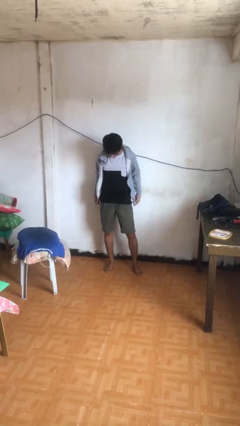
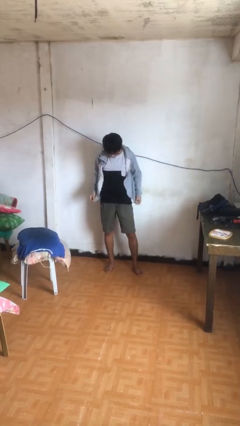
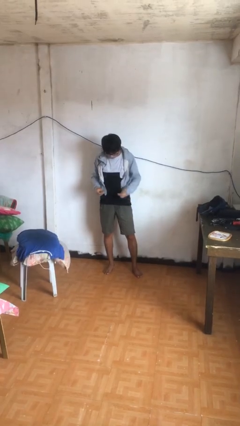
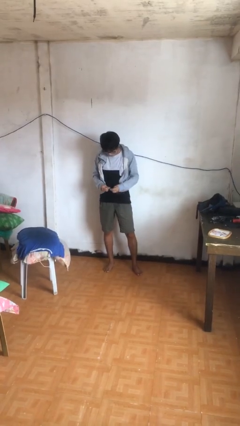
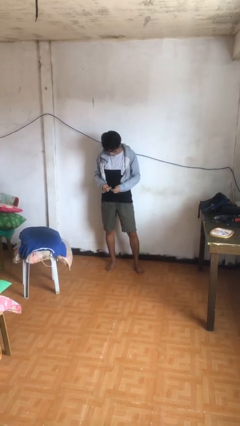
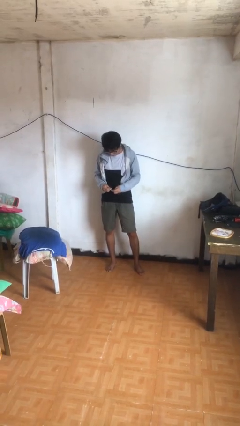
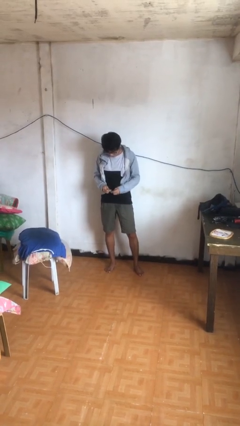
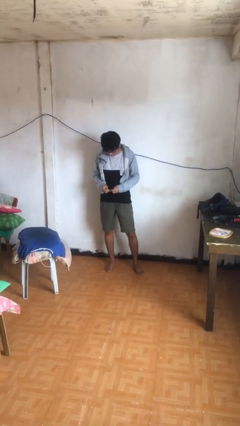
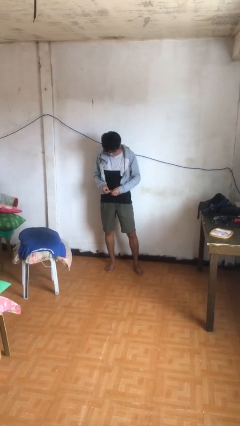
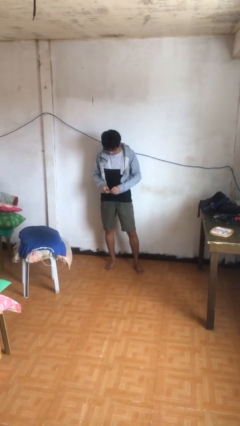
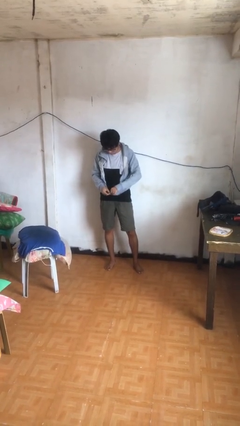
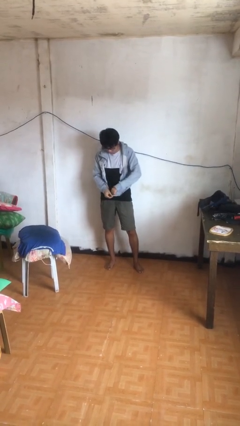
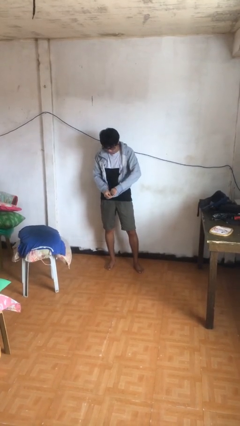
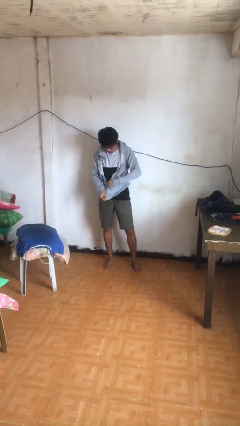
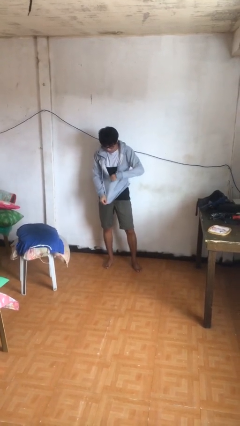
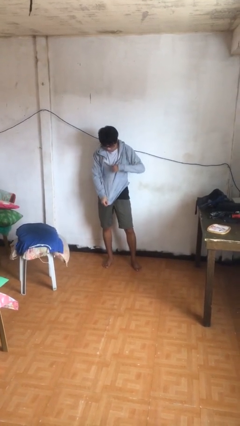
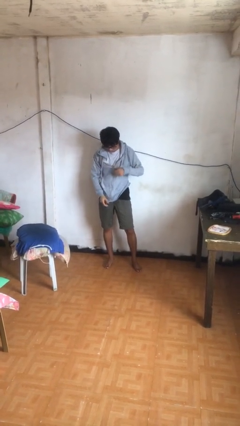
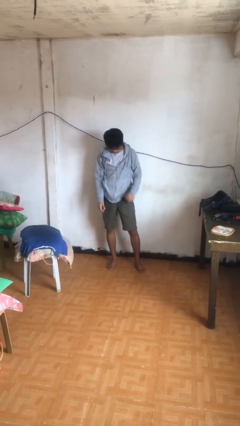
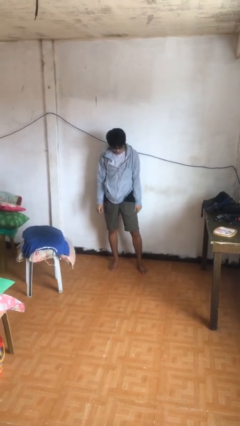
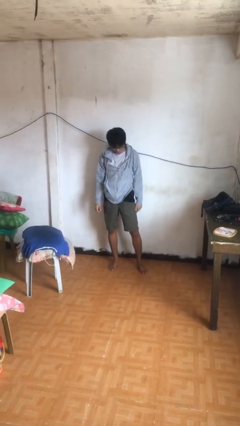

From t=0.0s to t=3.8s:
person zips up jacket

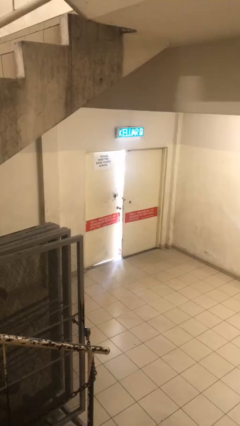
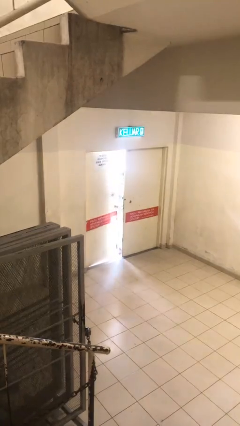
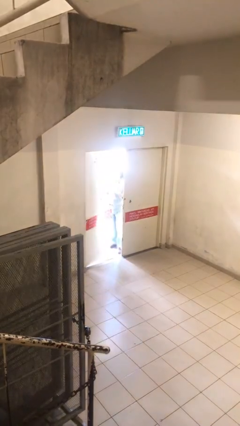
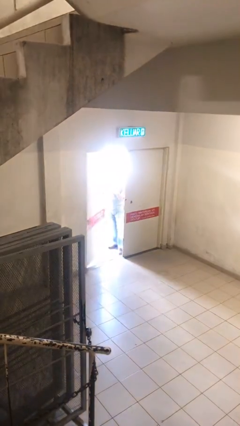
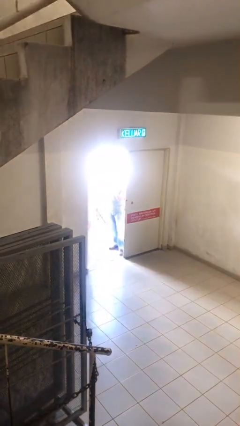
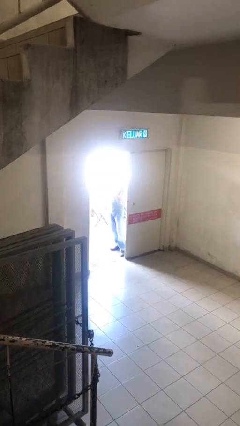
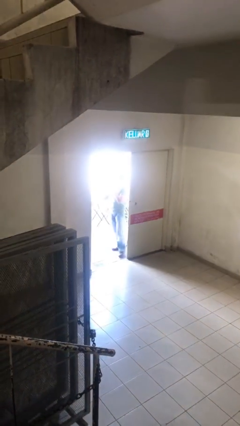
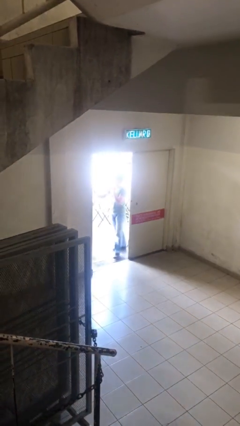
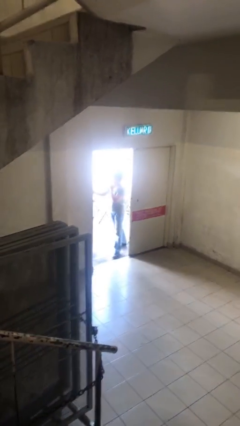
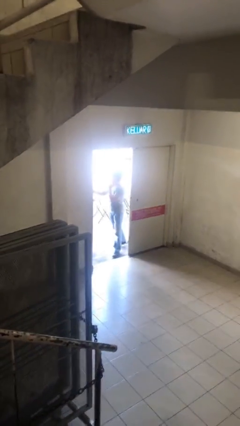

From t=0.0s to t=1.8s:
person opens facility door

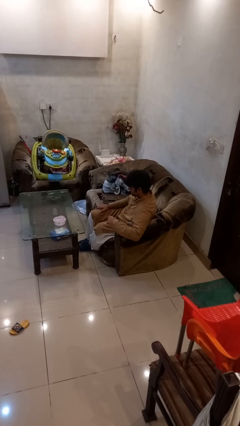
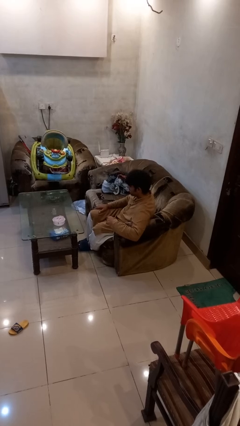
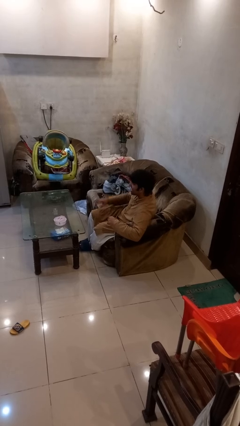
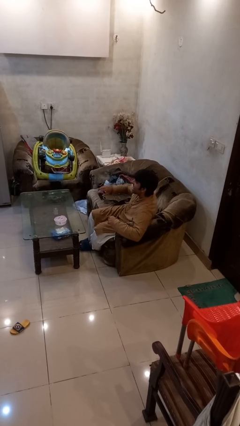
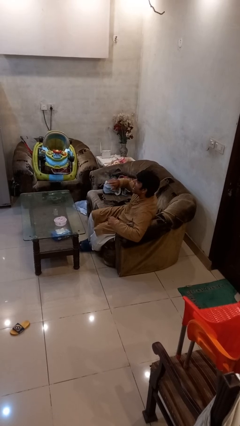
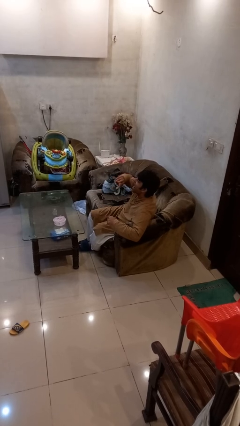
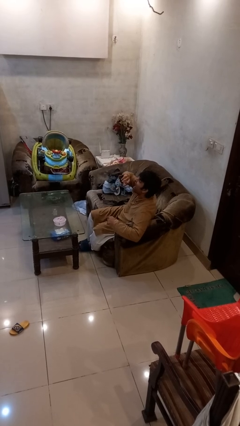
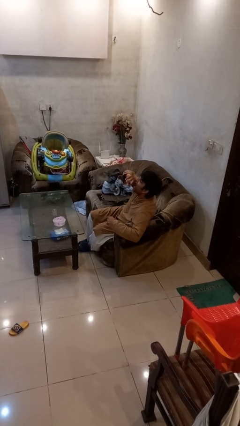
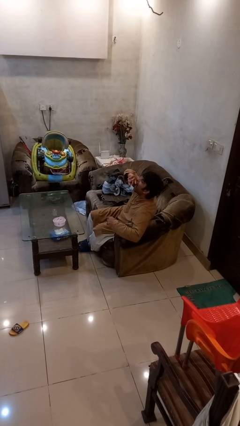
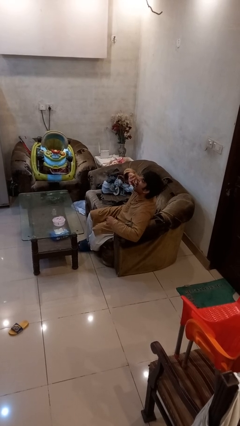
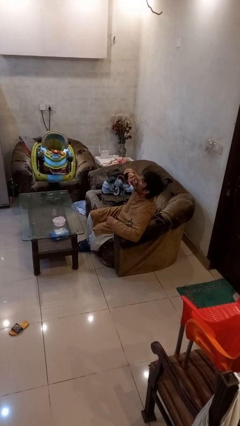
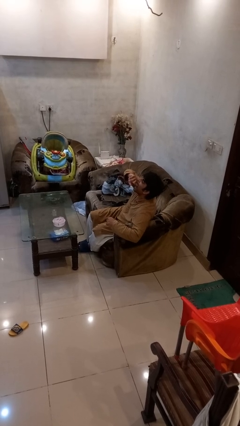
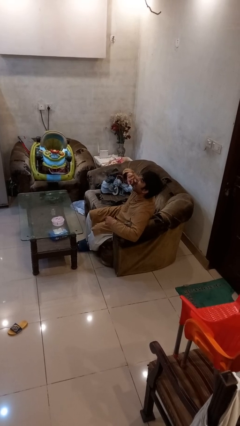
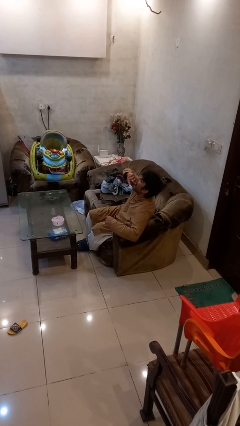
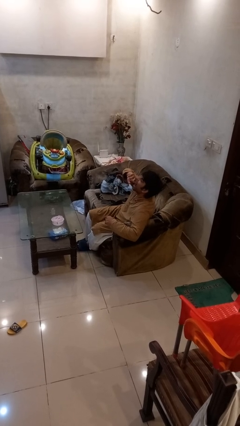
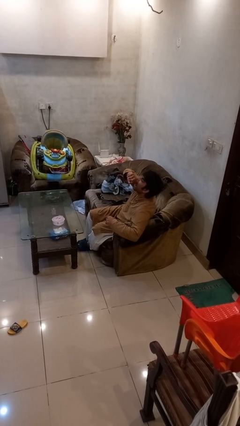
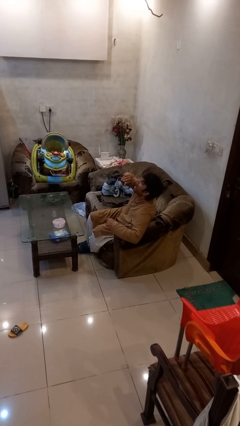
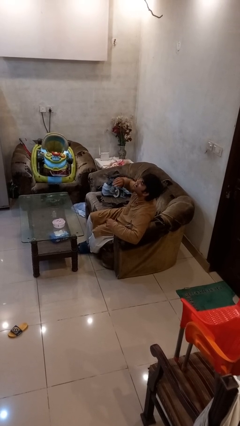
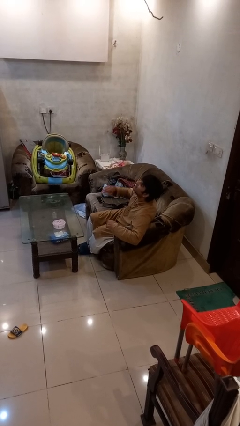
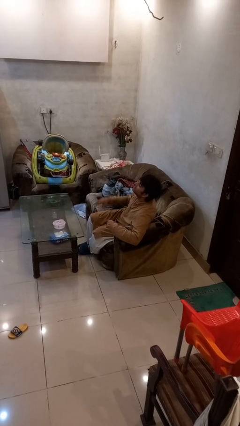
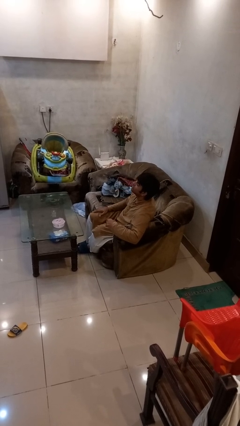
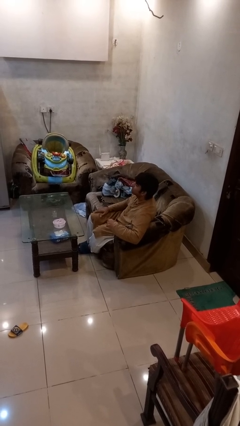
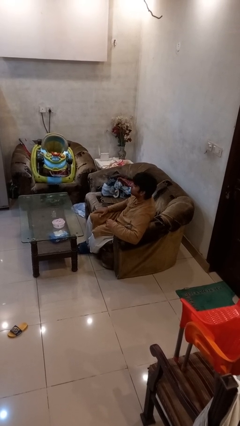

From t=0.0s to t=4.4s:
person yawns

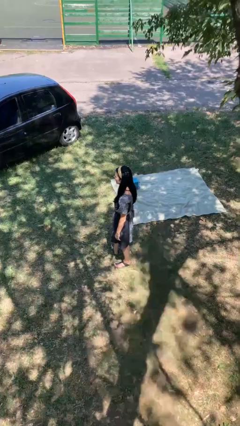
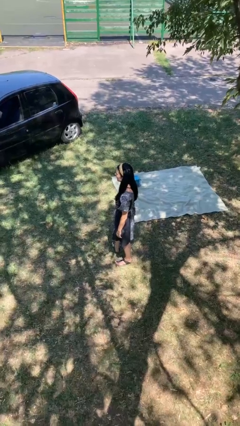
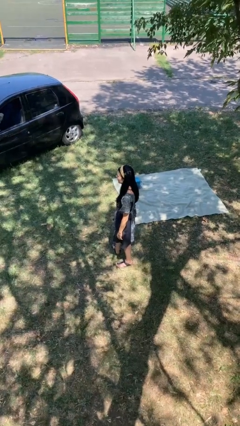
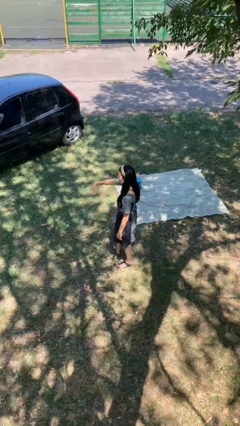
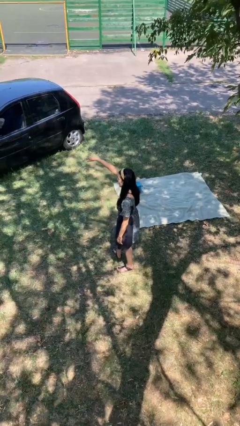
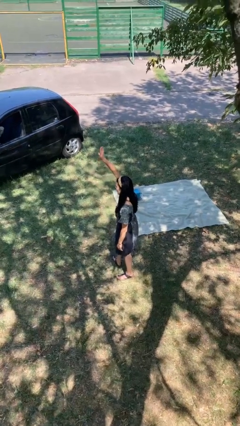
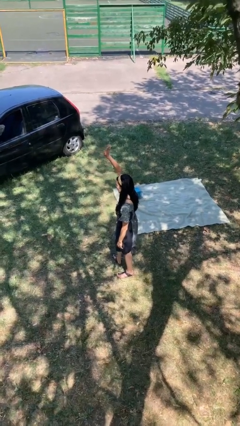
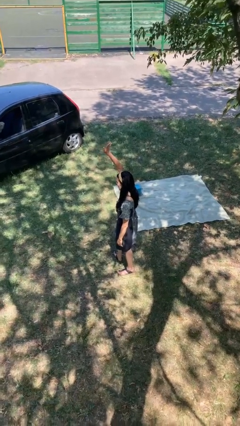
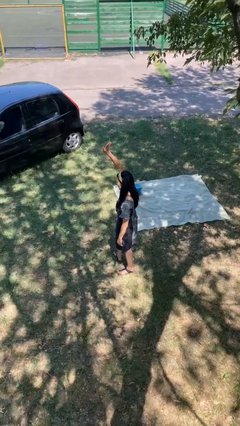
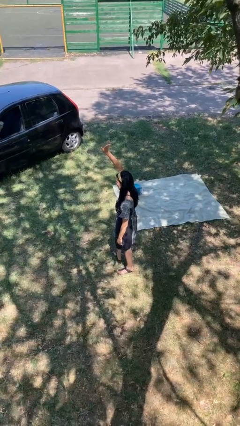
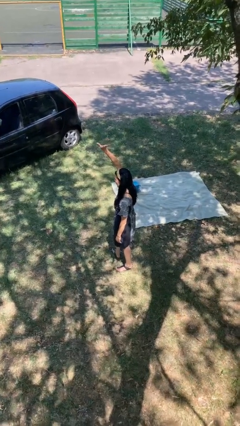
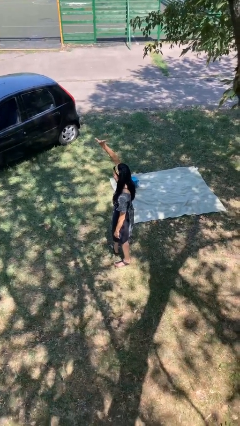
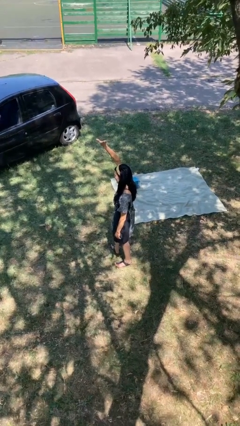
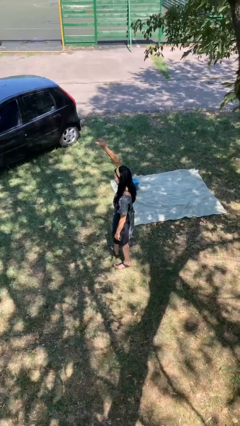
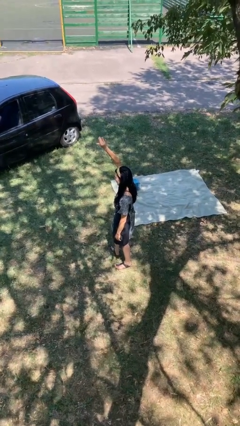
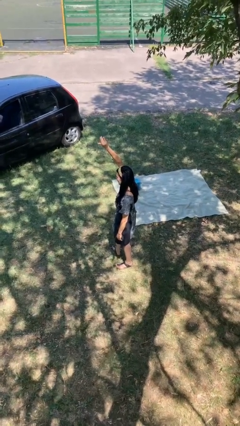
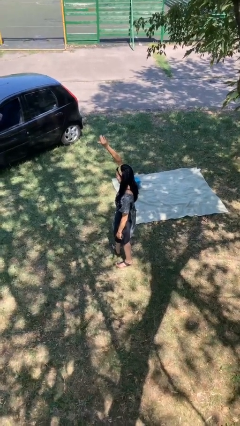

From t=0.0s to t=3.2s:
person gestures raise hand

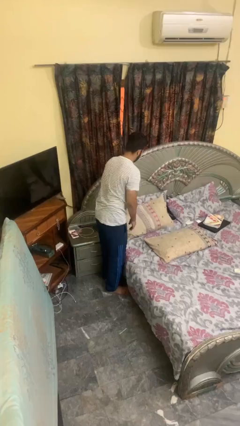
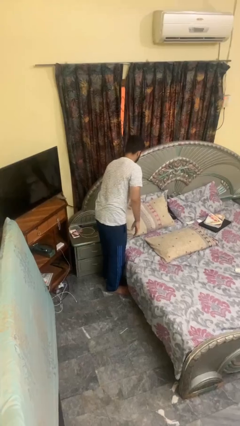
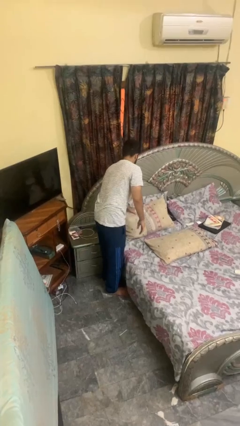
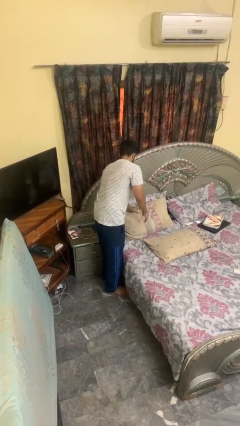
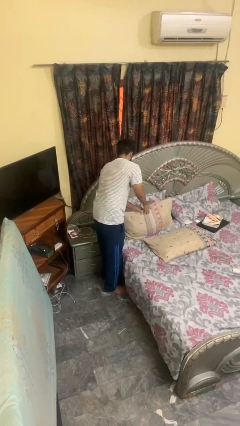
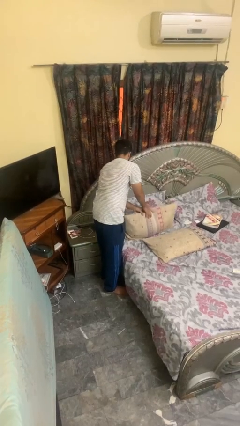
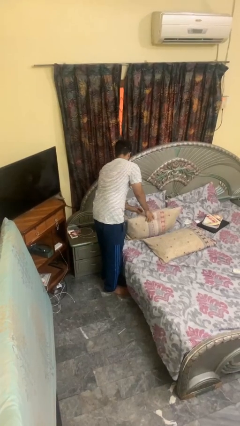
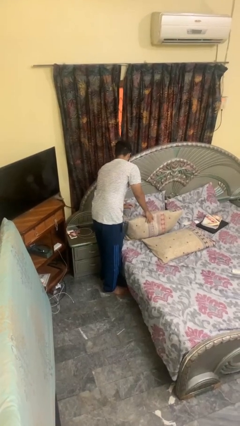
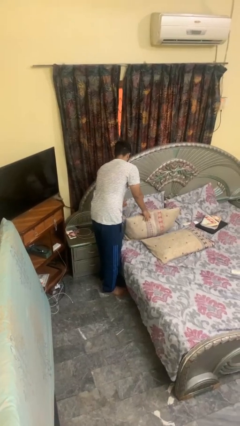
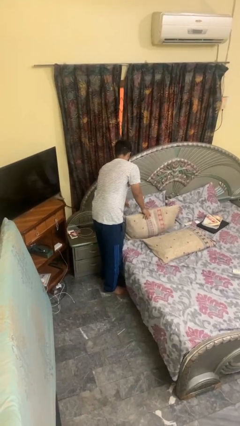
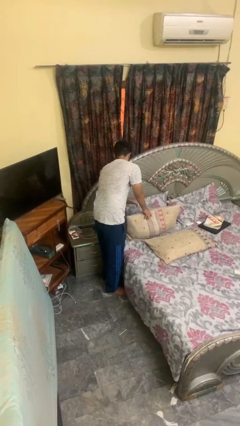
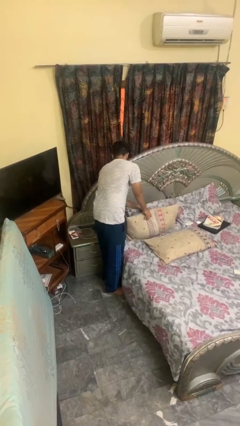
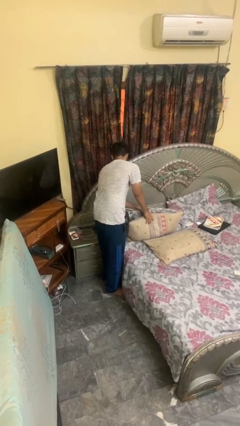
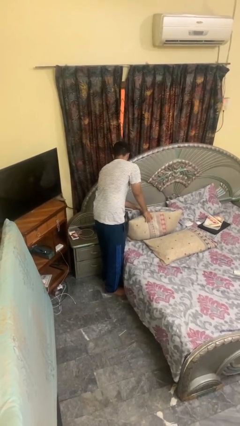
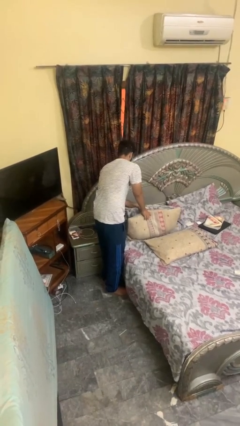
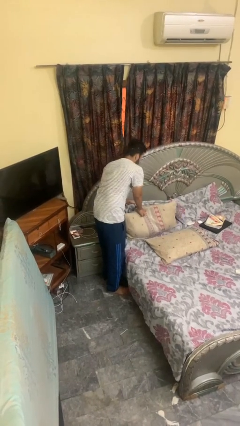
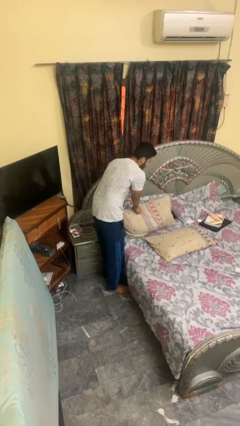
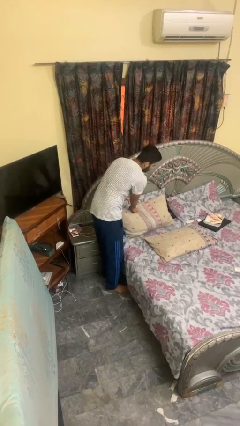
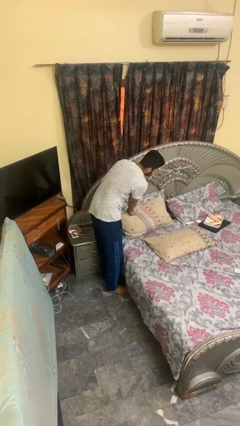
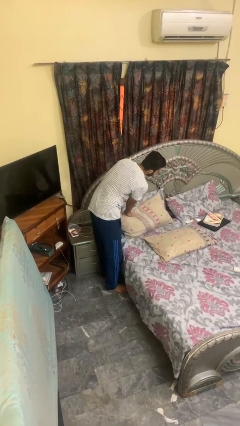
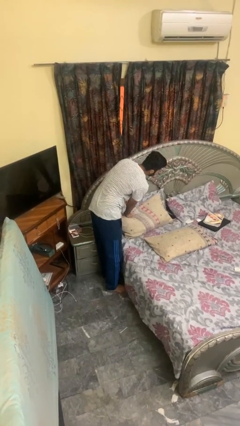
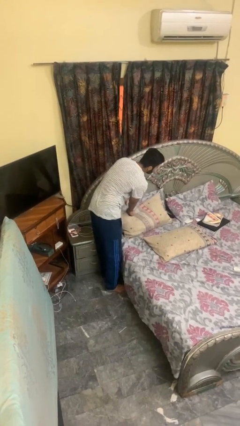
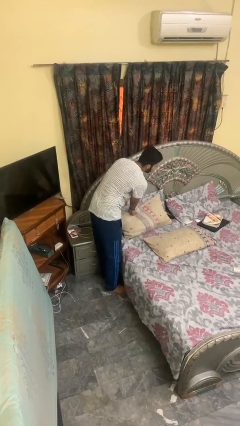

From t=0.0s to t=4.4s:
person searches under bed

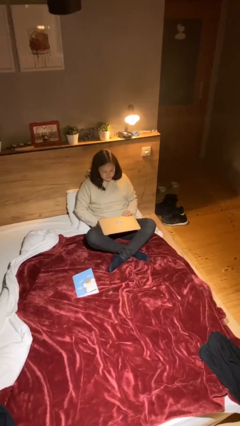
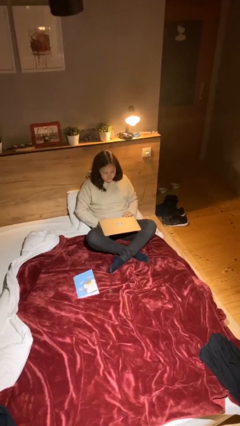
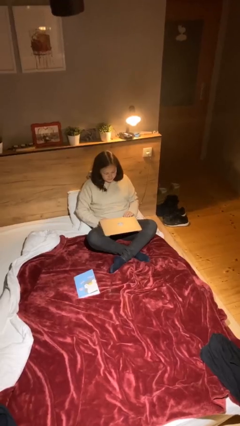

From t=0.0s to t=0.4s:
person interacts with laptop
